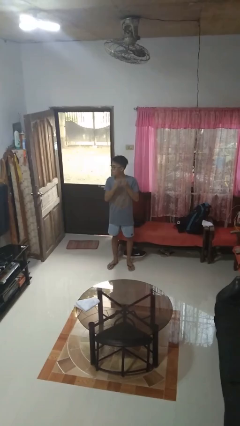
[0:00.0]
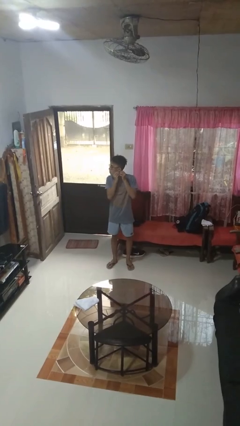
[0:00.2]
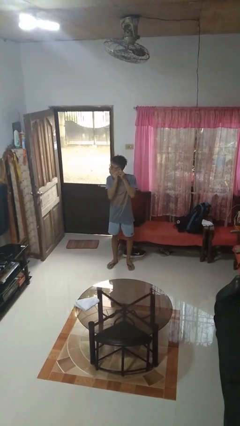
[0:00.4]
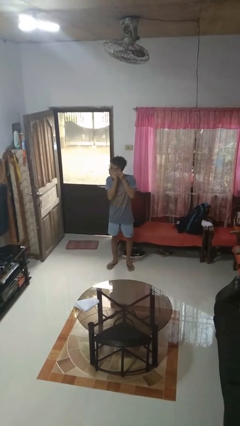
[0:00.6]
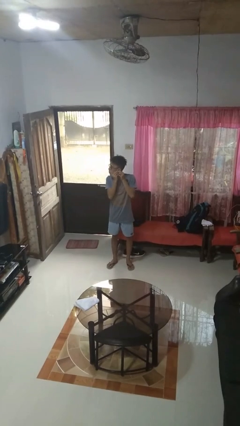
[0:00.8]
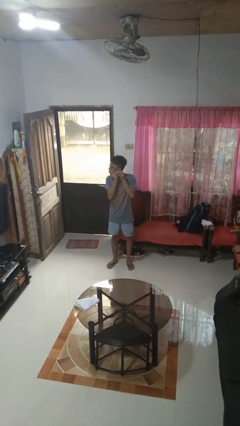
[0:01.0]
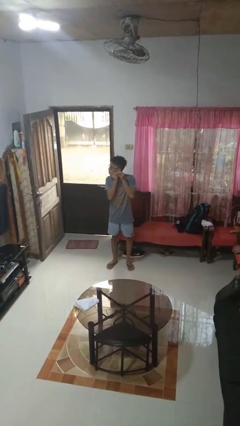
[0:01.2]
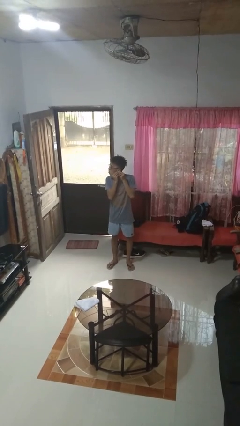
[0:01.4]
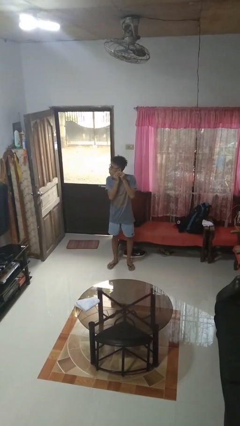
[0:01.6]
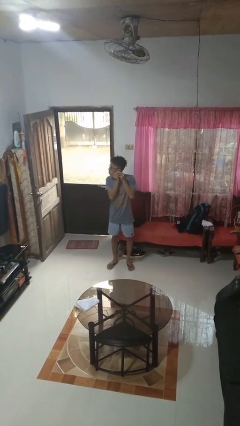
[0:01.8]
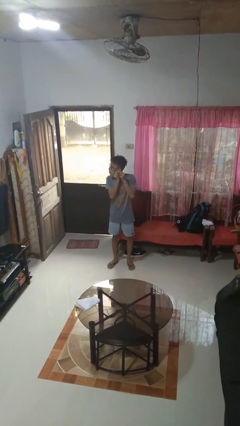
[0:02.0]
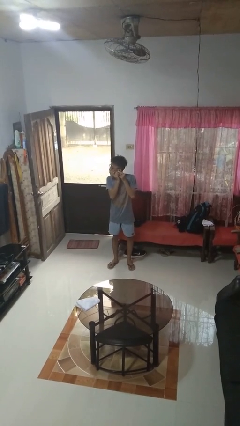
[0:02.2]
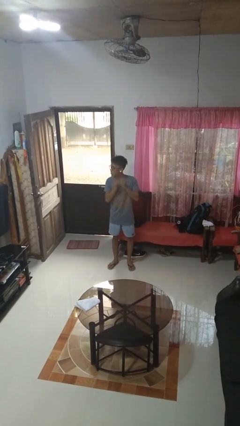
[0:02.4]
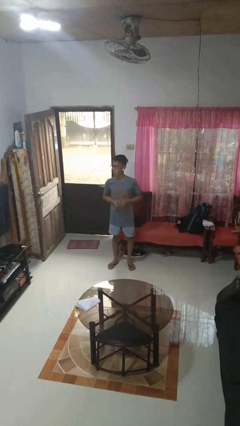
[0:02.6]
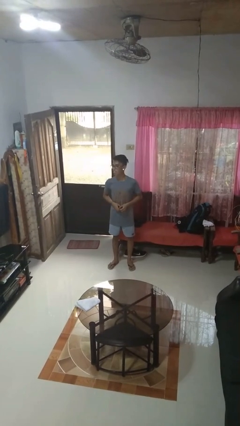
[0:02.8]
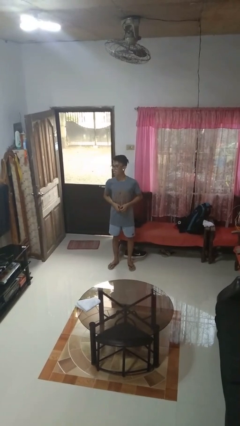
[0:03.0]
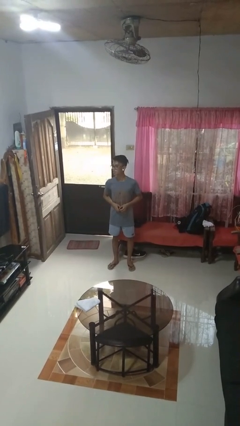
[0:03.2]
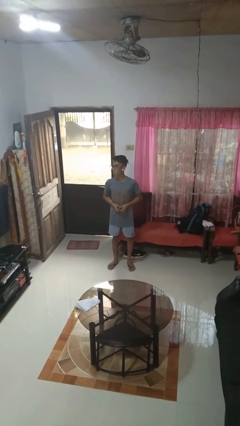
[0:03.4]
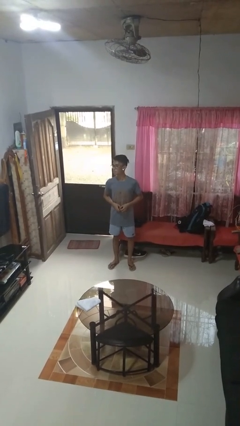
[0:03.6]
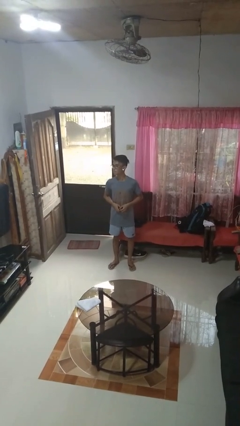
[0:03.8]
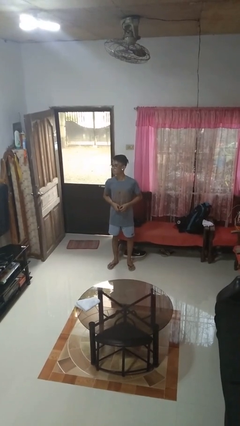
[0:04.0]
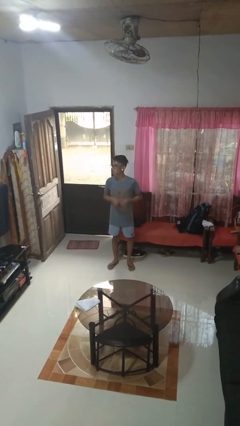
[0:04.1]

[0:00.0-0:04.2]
person puts on earrings

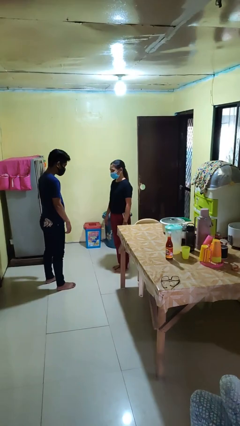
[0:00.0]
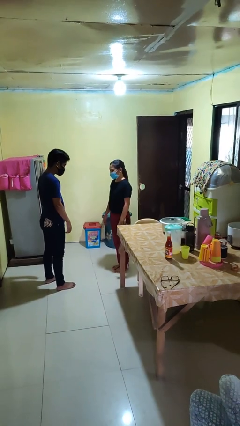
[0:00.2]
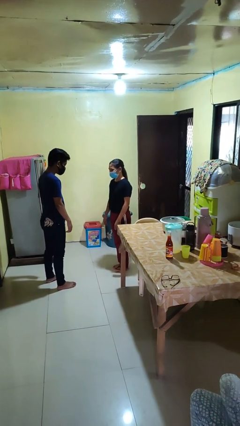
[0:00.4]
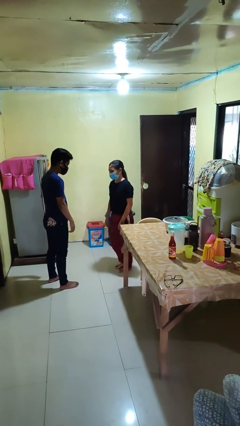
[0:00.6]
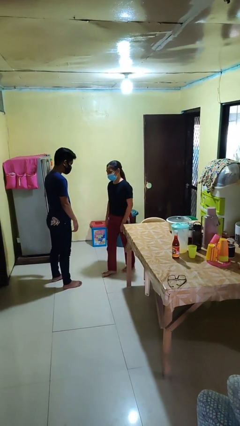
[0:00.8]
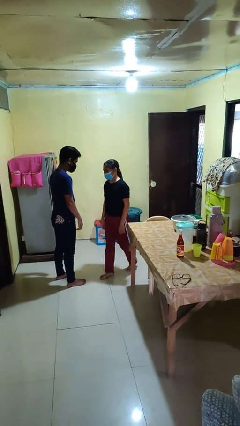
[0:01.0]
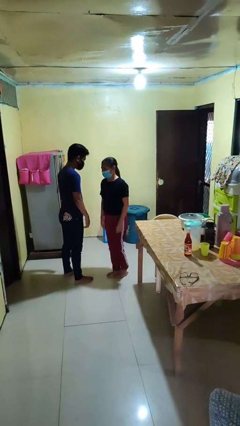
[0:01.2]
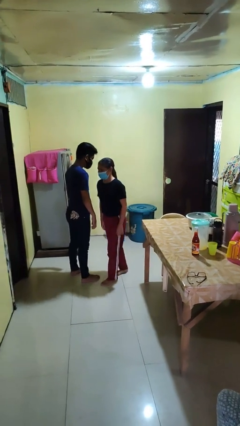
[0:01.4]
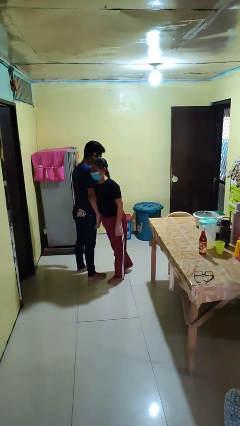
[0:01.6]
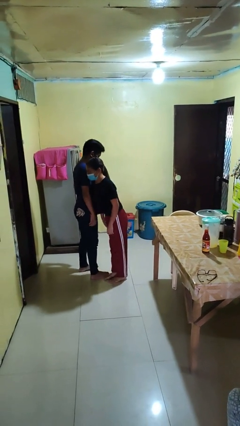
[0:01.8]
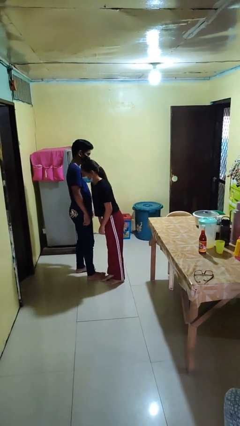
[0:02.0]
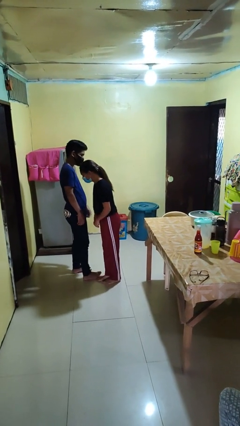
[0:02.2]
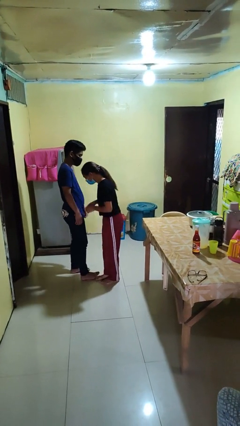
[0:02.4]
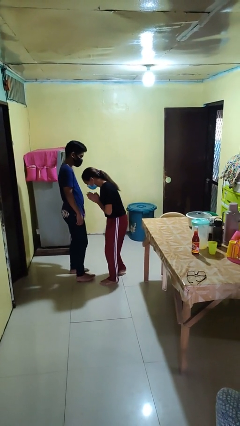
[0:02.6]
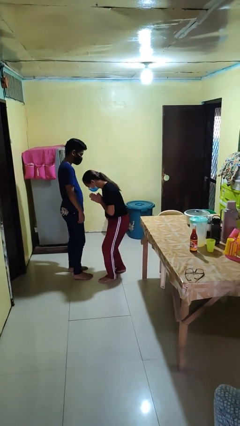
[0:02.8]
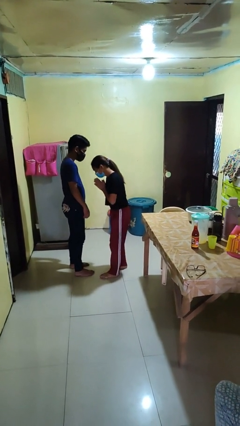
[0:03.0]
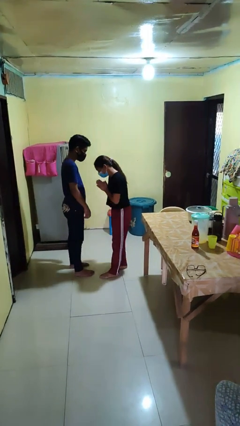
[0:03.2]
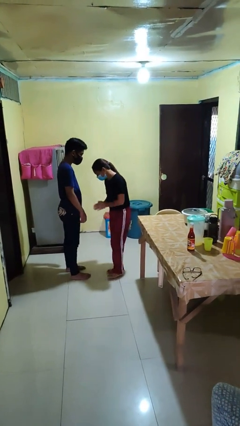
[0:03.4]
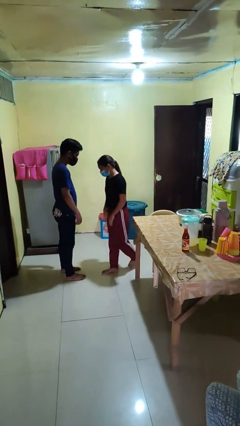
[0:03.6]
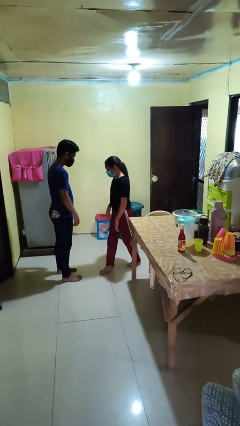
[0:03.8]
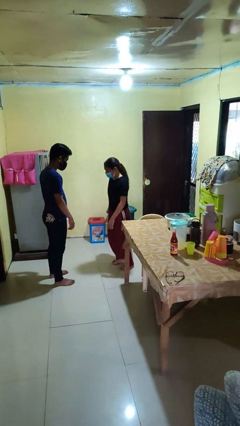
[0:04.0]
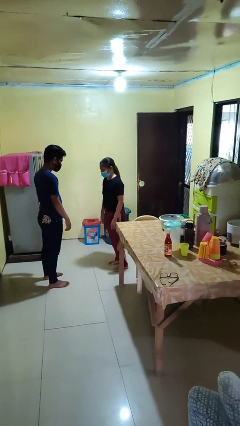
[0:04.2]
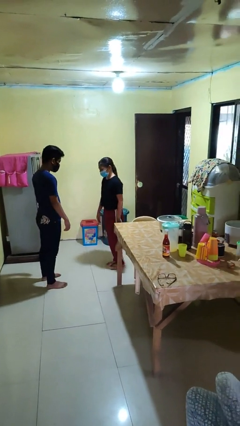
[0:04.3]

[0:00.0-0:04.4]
person bumps into person

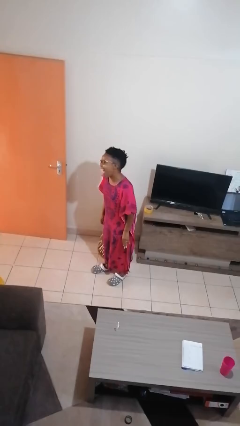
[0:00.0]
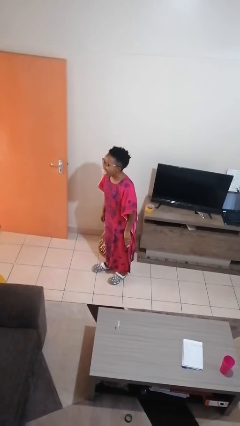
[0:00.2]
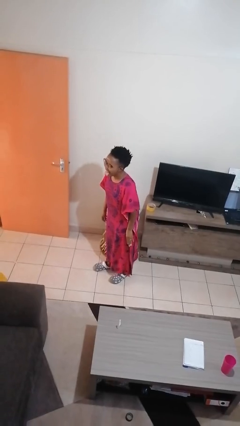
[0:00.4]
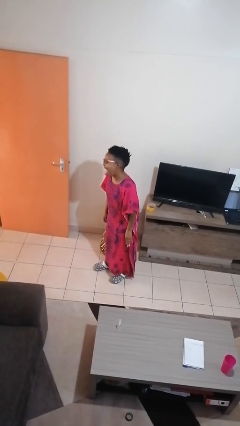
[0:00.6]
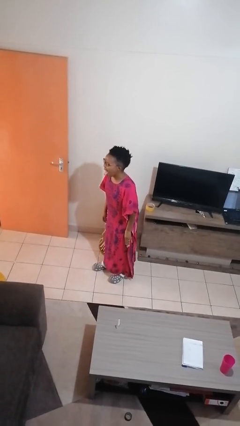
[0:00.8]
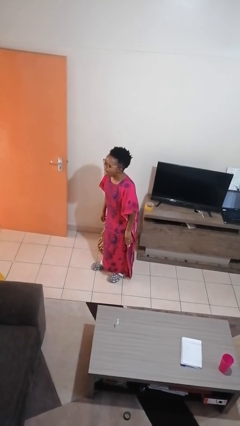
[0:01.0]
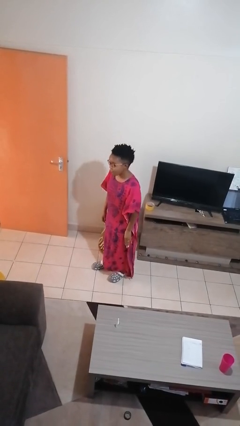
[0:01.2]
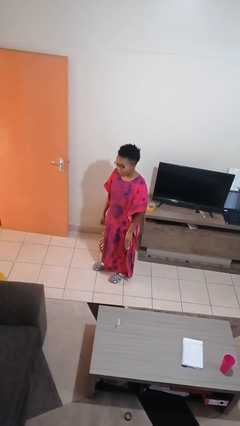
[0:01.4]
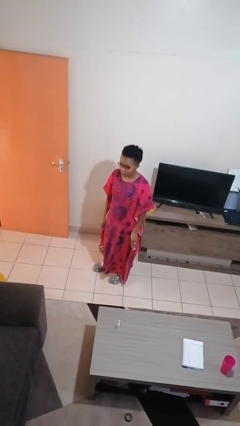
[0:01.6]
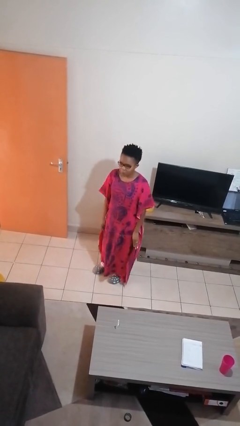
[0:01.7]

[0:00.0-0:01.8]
person sticks out tongue

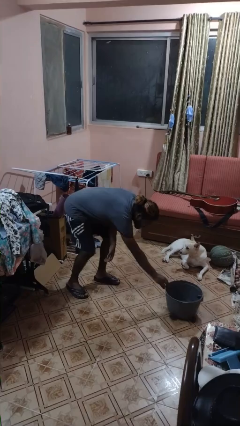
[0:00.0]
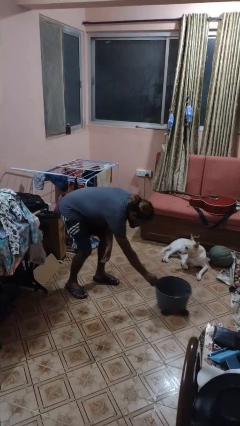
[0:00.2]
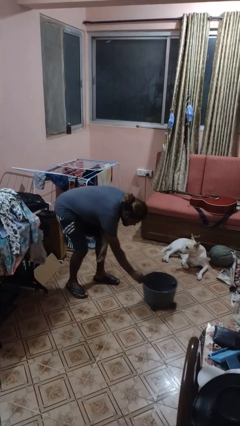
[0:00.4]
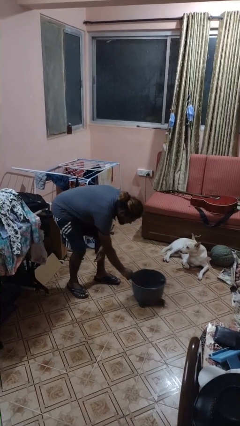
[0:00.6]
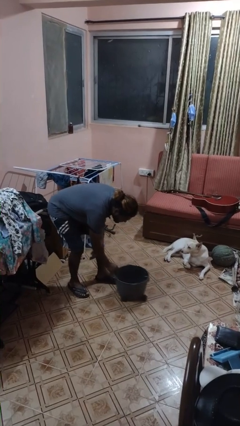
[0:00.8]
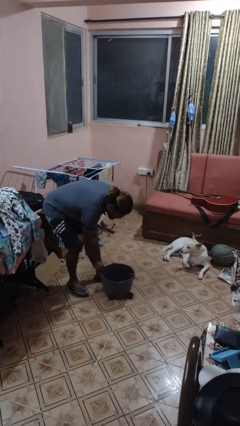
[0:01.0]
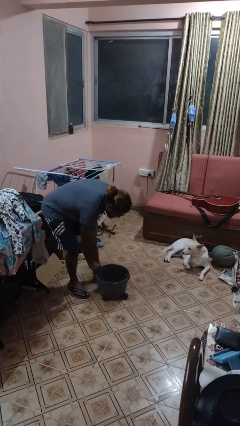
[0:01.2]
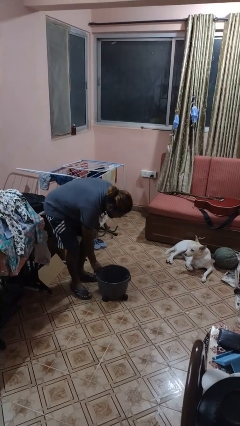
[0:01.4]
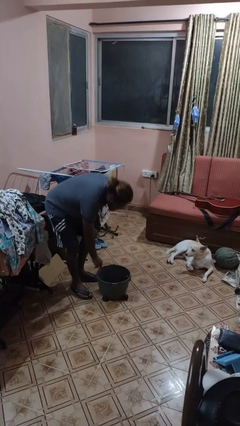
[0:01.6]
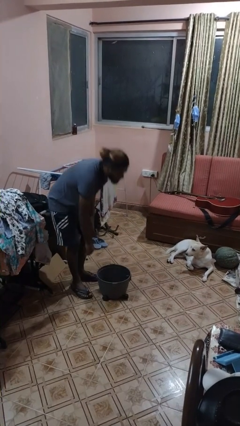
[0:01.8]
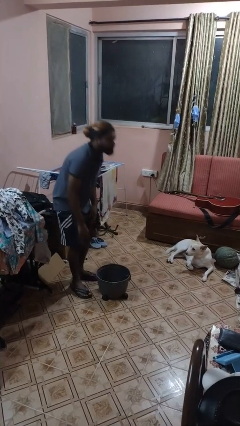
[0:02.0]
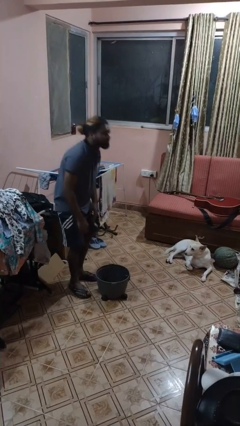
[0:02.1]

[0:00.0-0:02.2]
person pulls wheeled cart

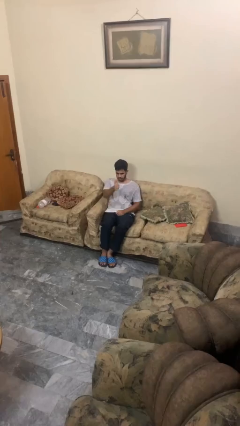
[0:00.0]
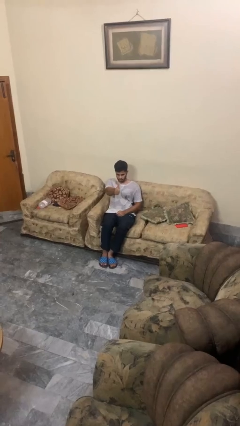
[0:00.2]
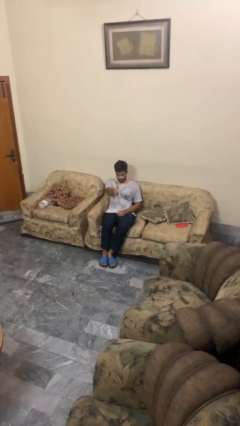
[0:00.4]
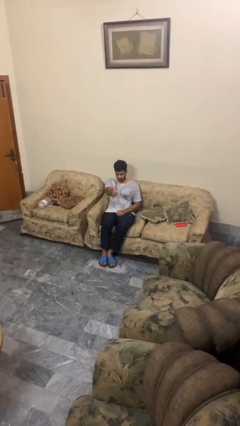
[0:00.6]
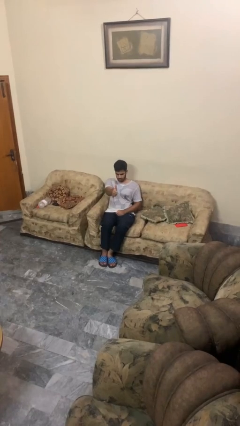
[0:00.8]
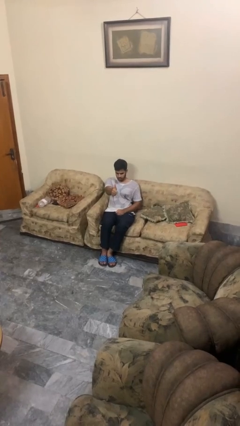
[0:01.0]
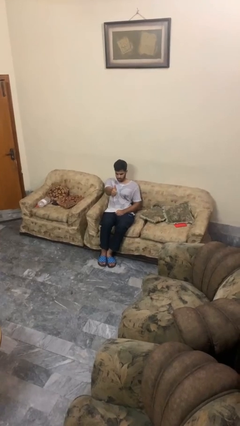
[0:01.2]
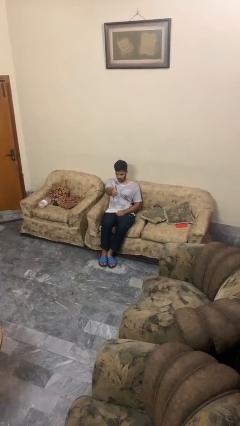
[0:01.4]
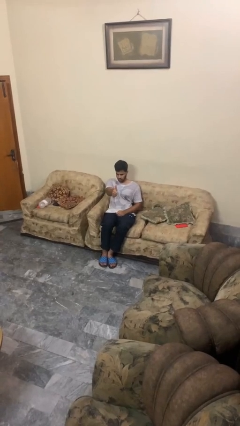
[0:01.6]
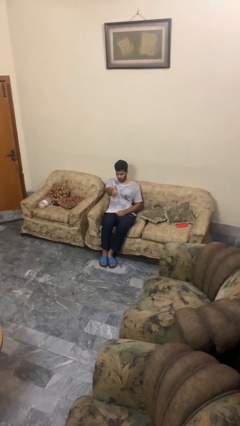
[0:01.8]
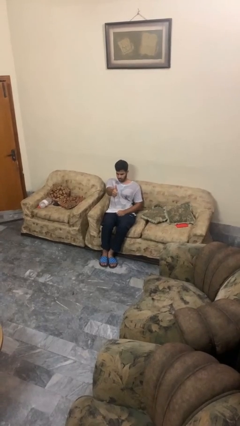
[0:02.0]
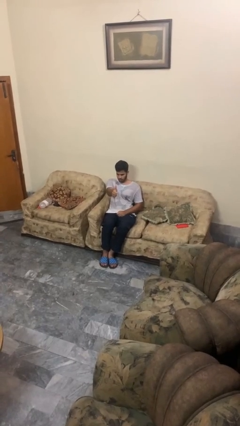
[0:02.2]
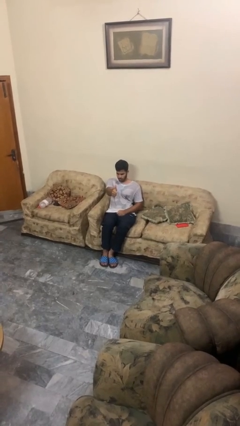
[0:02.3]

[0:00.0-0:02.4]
person gestures thumbs up

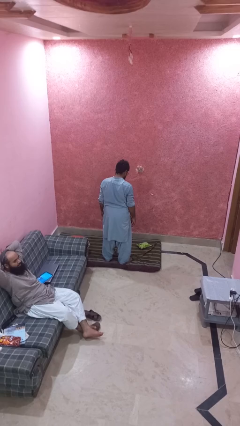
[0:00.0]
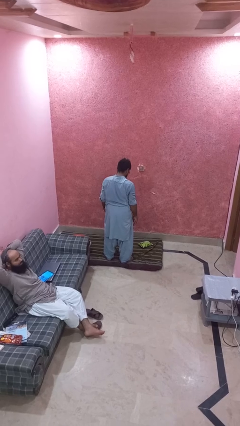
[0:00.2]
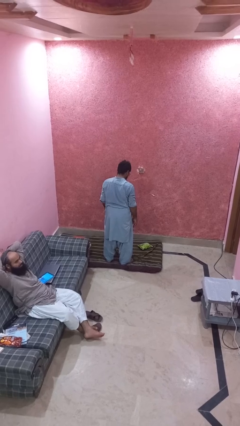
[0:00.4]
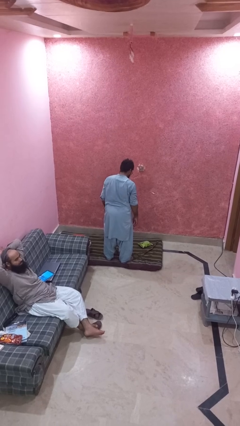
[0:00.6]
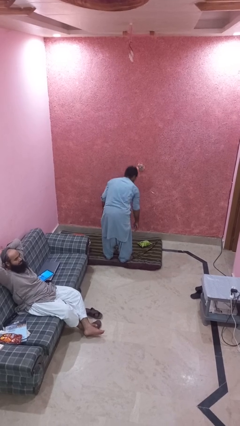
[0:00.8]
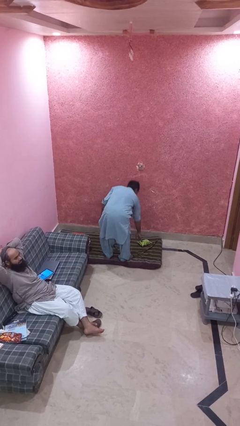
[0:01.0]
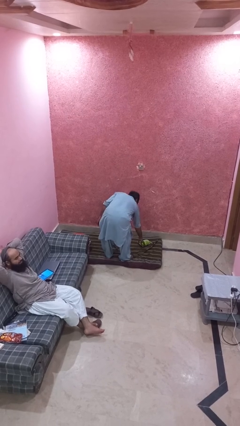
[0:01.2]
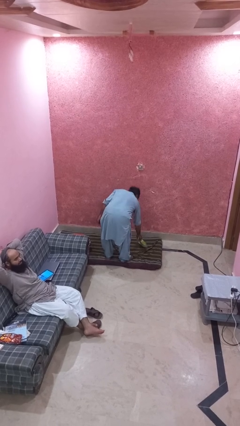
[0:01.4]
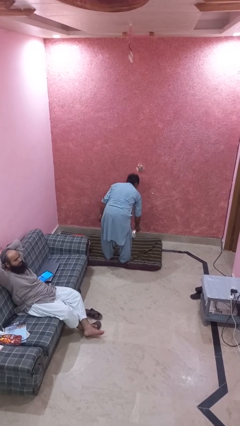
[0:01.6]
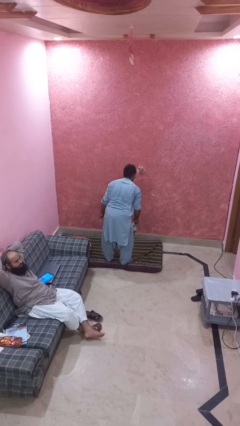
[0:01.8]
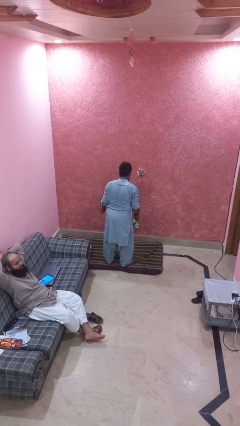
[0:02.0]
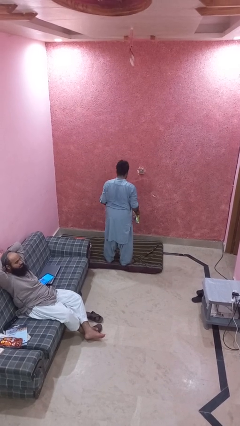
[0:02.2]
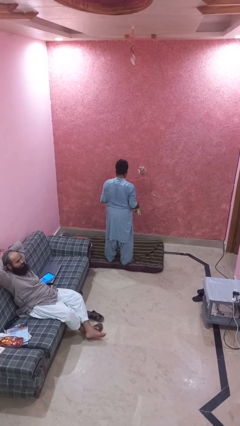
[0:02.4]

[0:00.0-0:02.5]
person picks up object from floor

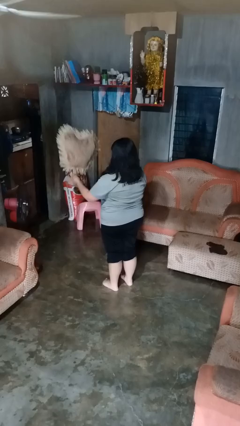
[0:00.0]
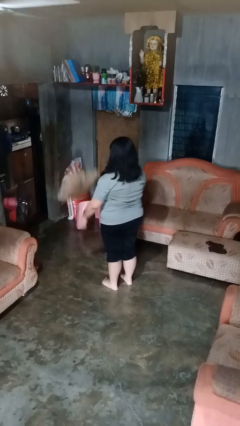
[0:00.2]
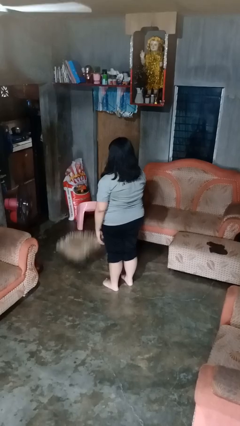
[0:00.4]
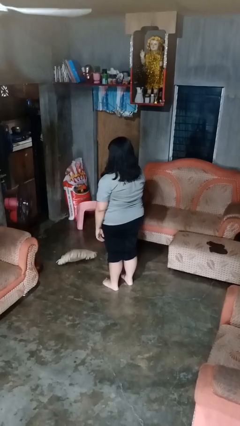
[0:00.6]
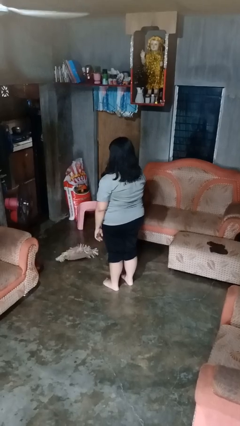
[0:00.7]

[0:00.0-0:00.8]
person throws object into air
